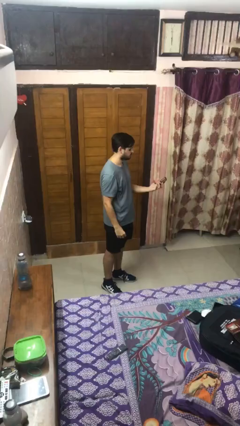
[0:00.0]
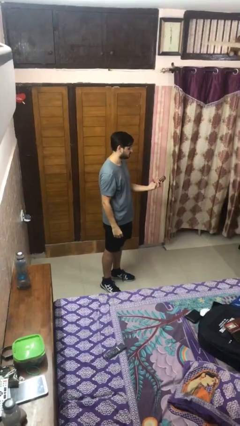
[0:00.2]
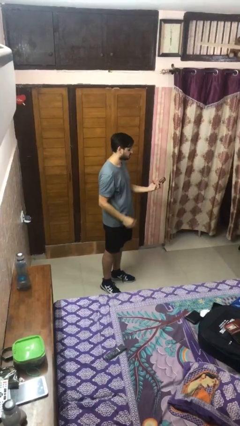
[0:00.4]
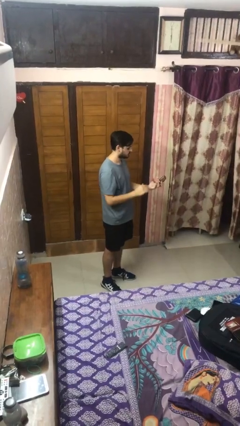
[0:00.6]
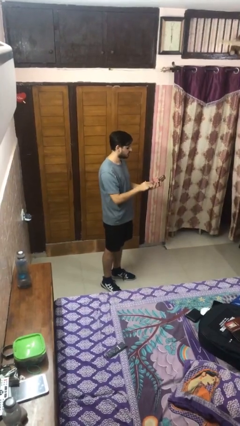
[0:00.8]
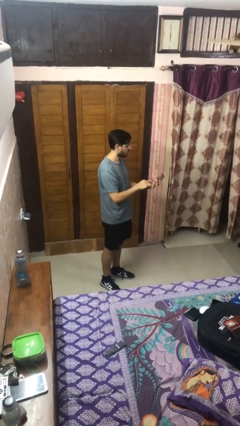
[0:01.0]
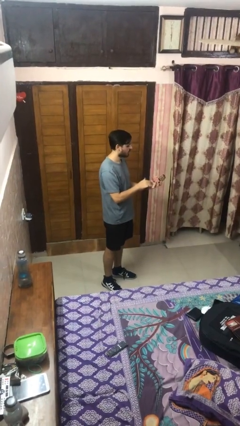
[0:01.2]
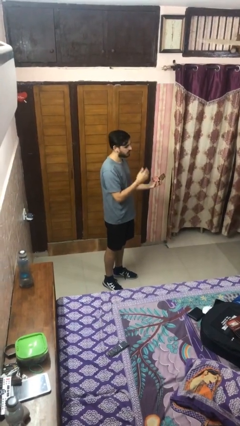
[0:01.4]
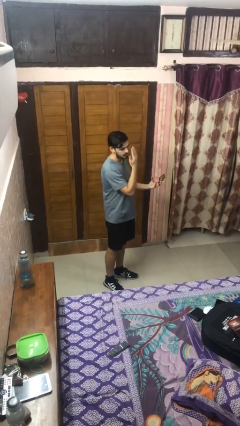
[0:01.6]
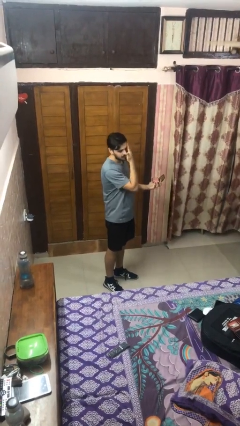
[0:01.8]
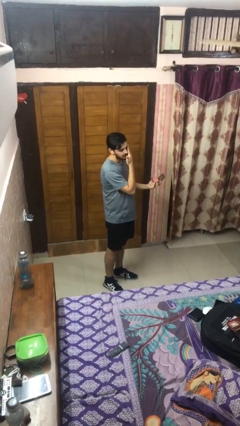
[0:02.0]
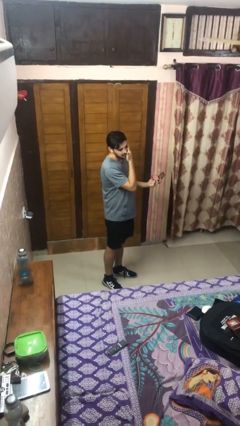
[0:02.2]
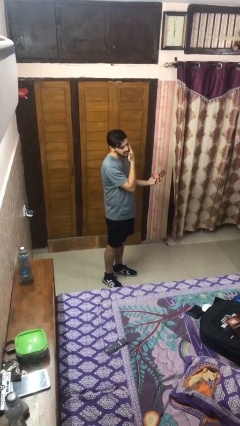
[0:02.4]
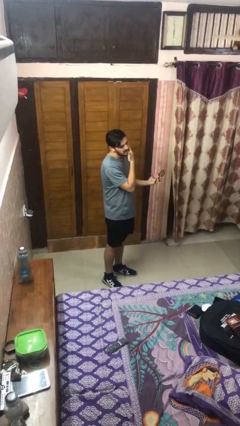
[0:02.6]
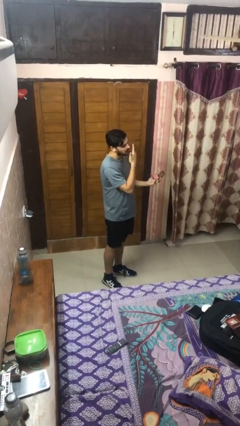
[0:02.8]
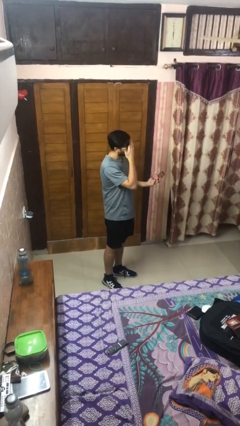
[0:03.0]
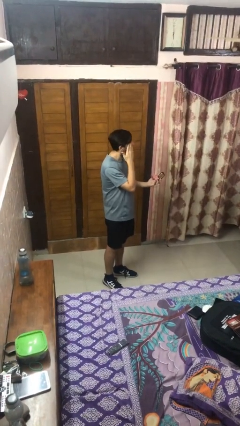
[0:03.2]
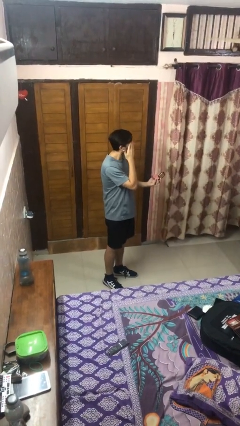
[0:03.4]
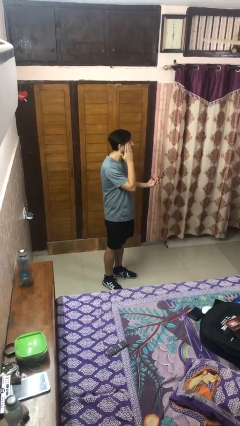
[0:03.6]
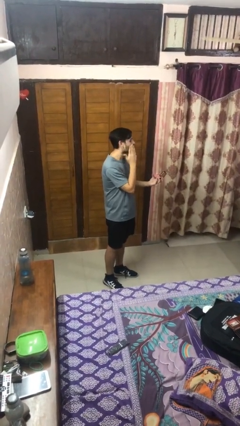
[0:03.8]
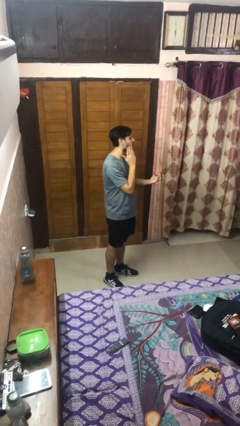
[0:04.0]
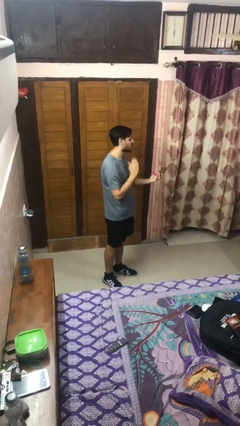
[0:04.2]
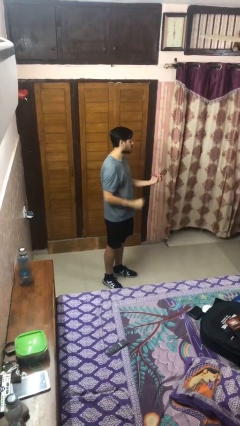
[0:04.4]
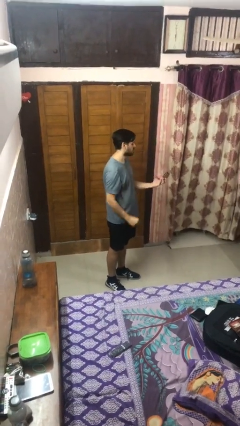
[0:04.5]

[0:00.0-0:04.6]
person applies foundation makeup

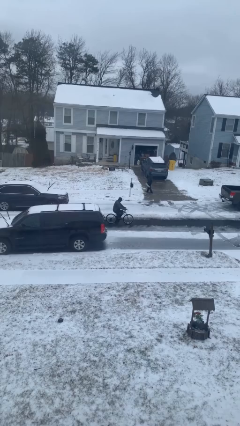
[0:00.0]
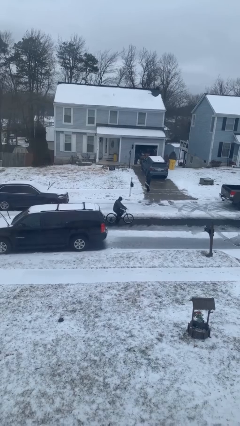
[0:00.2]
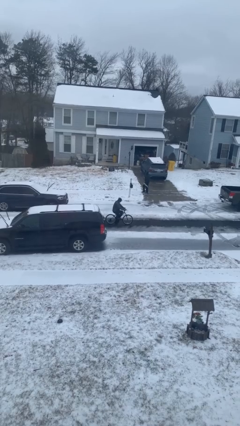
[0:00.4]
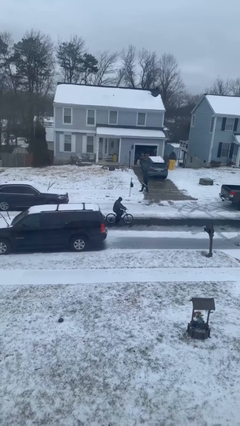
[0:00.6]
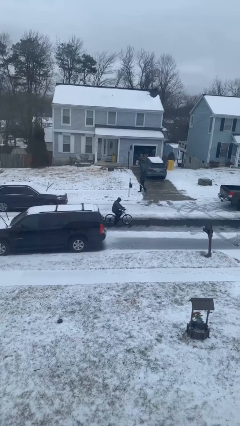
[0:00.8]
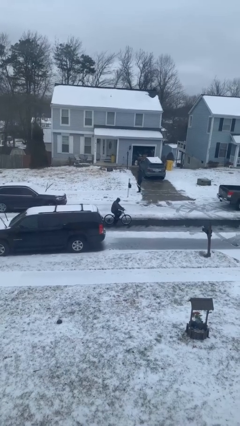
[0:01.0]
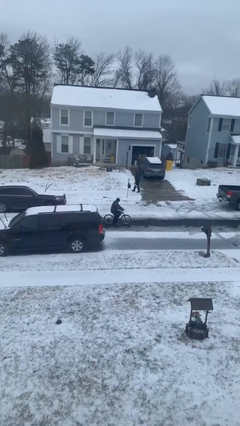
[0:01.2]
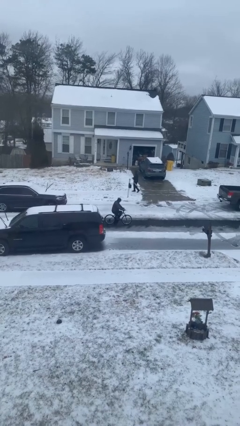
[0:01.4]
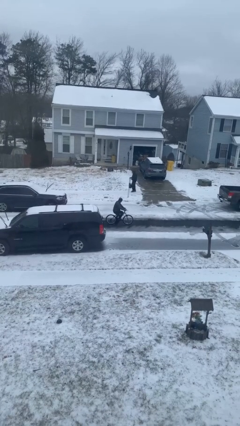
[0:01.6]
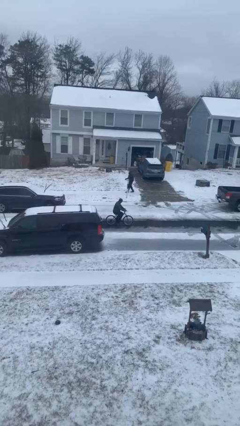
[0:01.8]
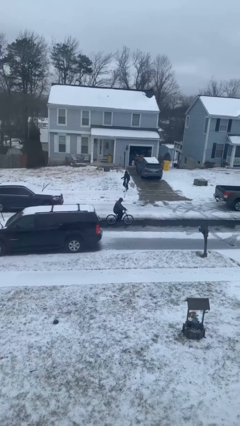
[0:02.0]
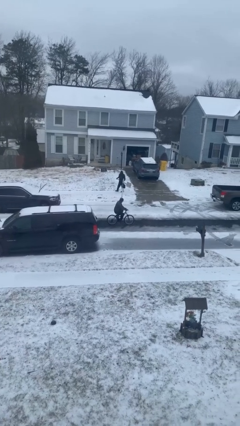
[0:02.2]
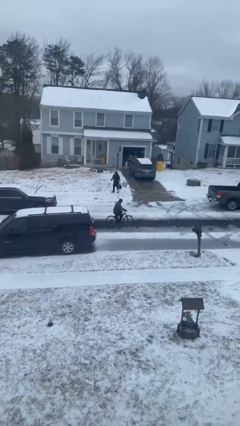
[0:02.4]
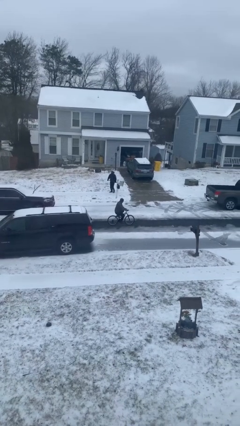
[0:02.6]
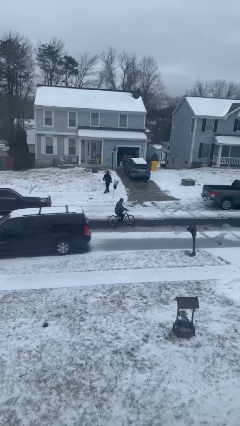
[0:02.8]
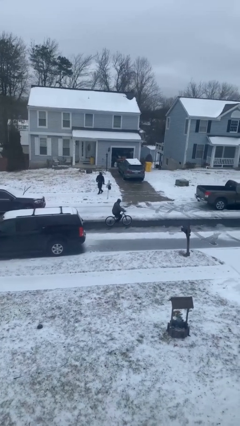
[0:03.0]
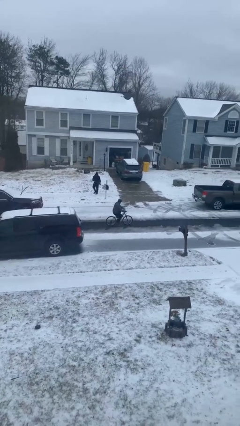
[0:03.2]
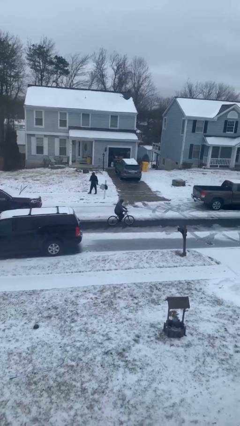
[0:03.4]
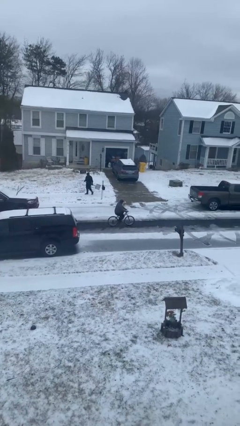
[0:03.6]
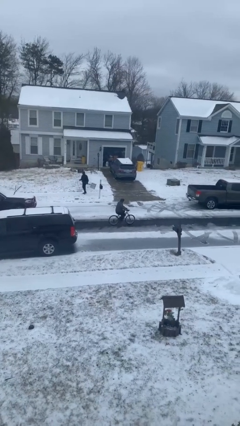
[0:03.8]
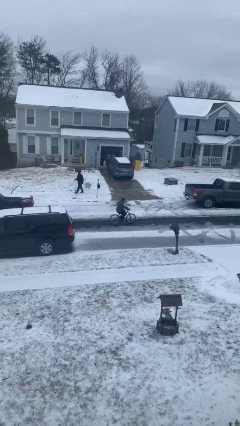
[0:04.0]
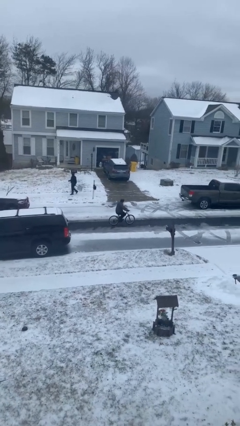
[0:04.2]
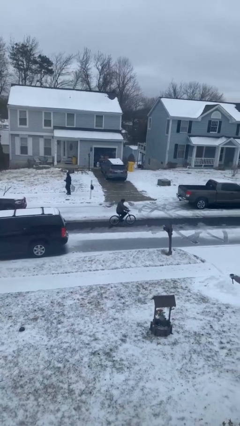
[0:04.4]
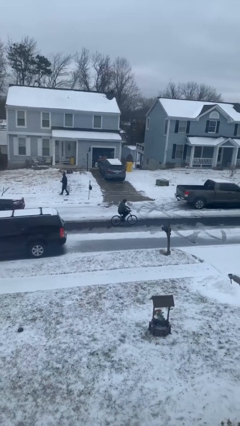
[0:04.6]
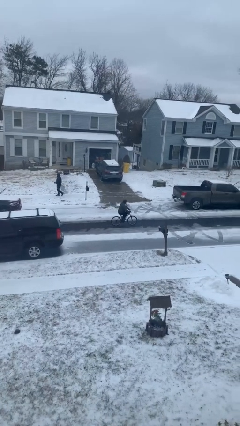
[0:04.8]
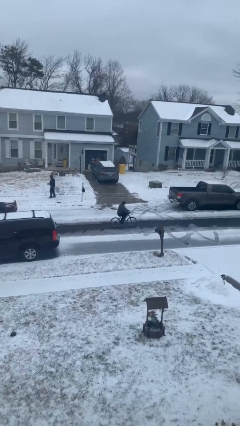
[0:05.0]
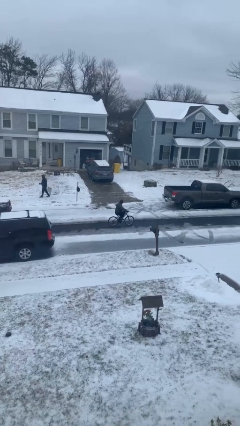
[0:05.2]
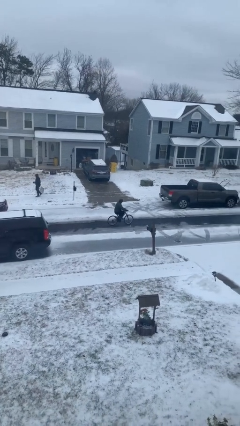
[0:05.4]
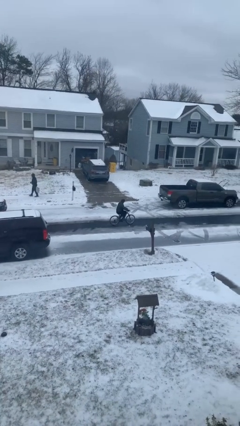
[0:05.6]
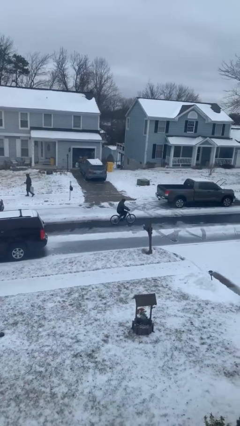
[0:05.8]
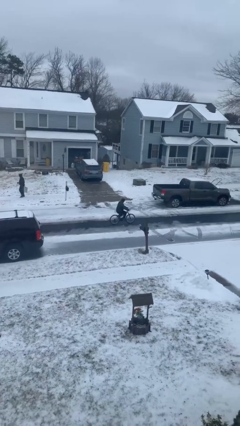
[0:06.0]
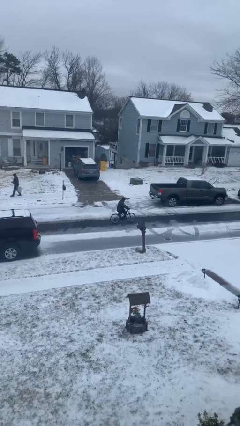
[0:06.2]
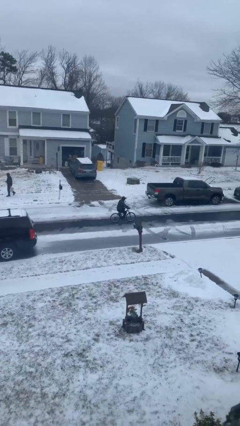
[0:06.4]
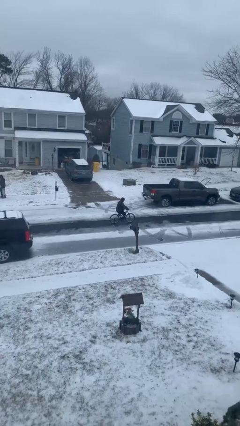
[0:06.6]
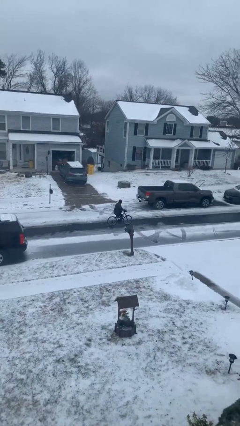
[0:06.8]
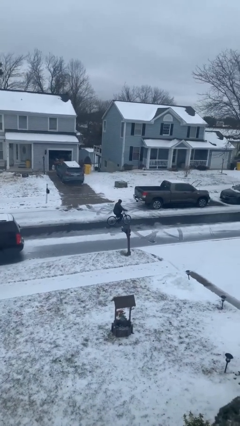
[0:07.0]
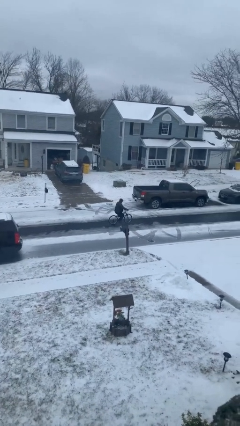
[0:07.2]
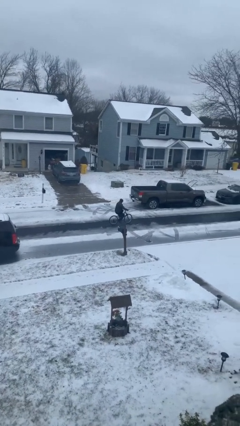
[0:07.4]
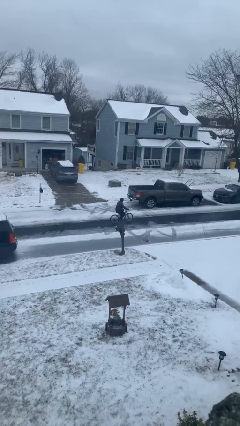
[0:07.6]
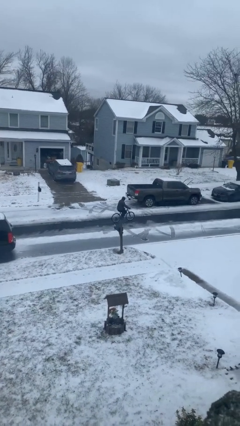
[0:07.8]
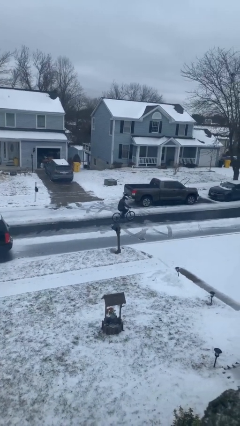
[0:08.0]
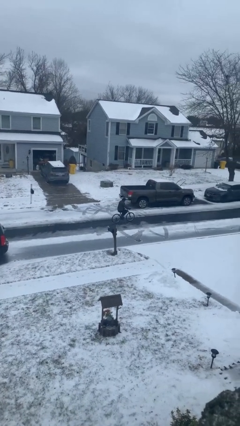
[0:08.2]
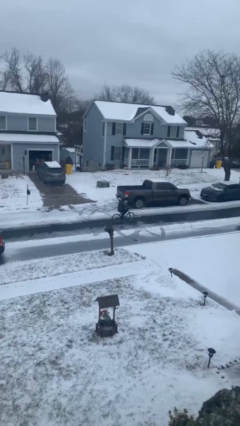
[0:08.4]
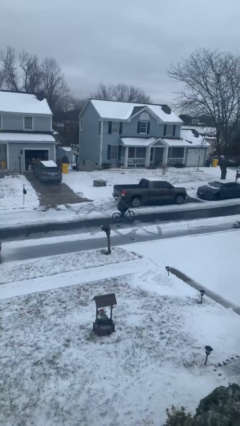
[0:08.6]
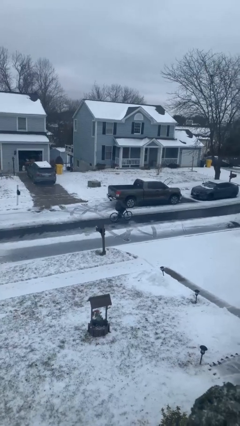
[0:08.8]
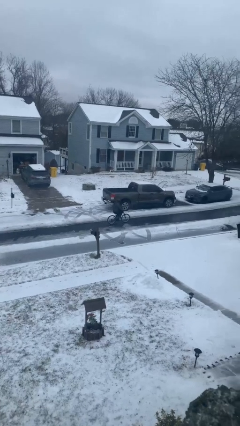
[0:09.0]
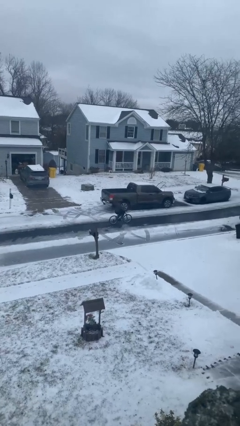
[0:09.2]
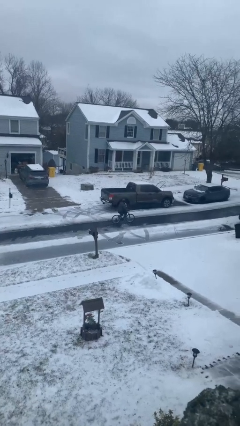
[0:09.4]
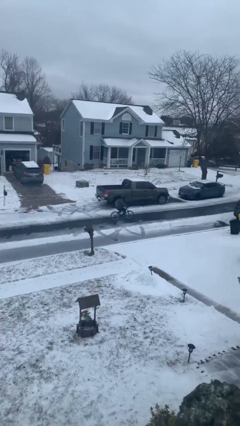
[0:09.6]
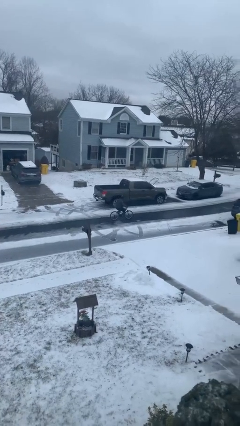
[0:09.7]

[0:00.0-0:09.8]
person rides bicycle

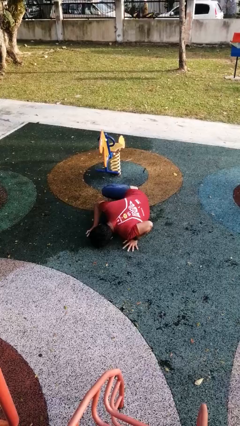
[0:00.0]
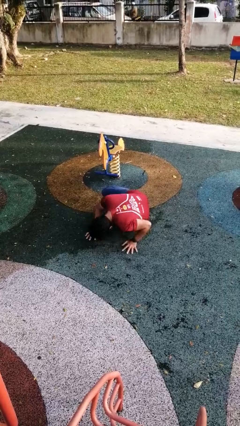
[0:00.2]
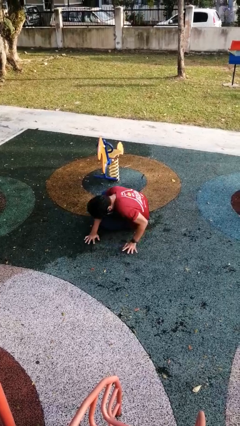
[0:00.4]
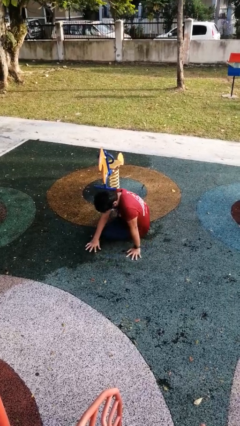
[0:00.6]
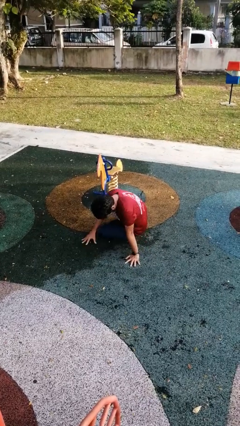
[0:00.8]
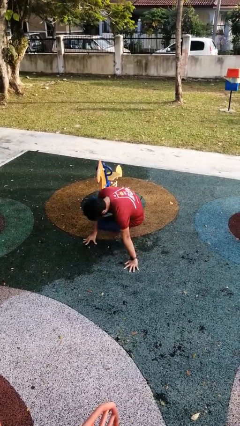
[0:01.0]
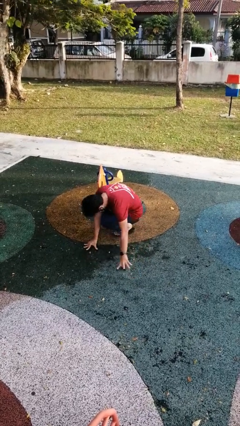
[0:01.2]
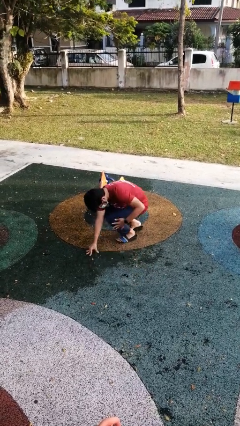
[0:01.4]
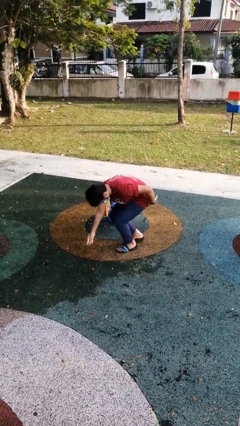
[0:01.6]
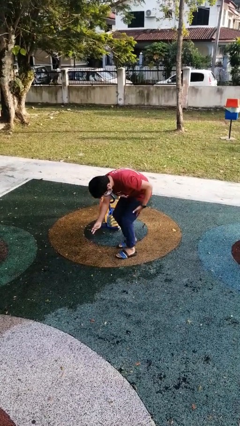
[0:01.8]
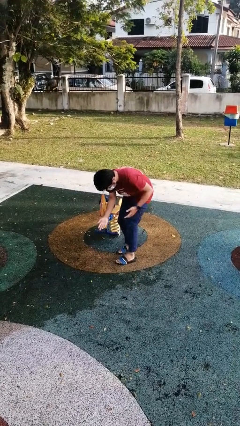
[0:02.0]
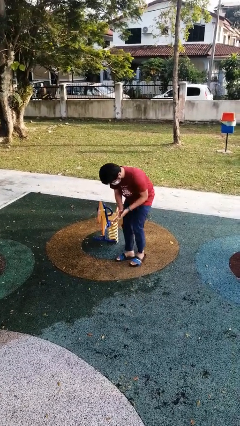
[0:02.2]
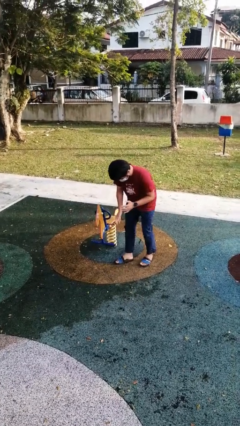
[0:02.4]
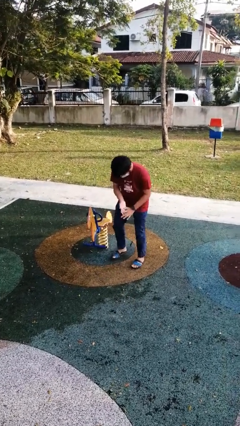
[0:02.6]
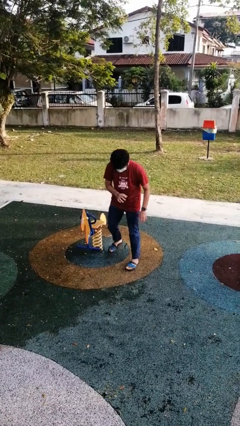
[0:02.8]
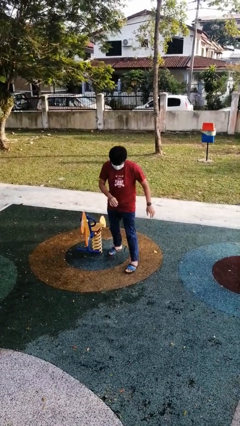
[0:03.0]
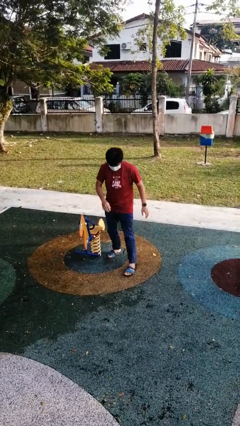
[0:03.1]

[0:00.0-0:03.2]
person stands up from floor

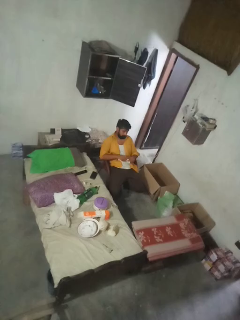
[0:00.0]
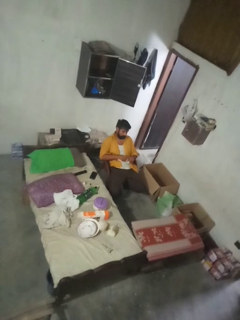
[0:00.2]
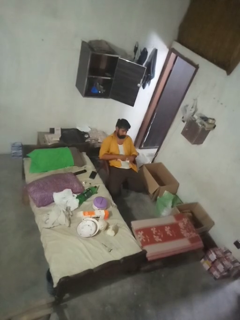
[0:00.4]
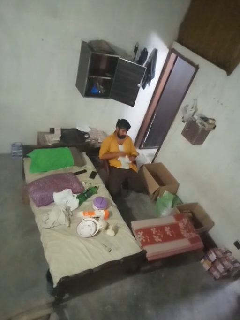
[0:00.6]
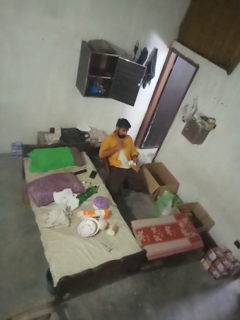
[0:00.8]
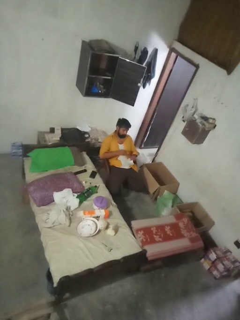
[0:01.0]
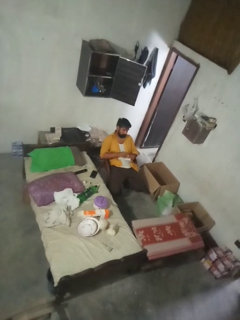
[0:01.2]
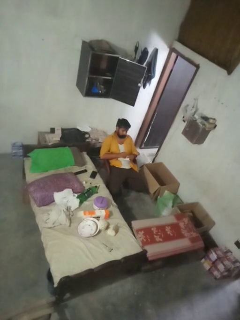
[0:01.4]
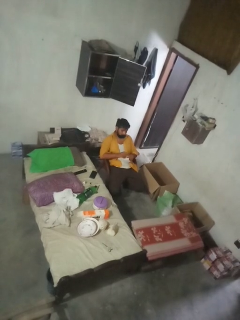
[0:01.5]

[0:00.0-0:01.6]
person tears paper
